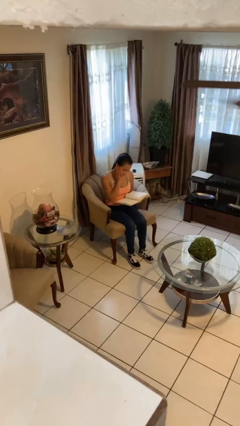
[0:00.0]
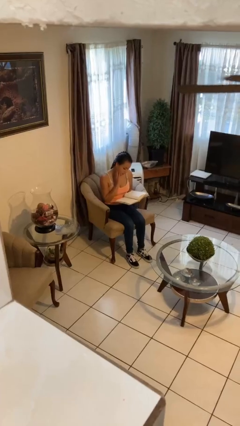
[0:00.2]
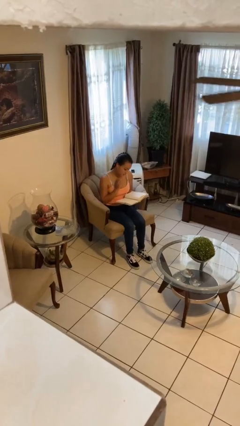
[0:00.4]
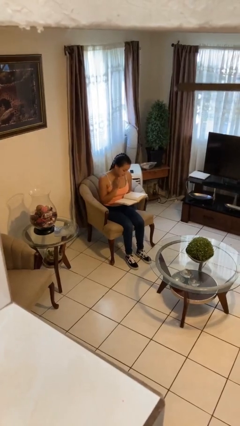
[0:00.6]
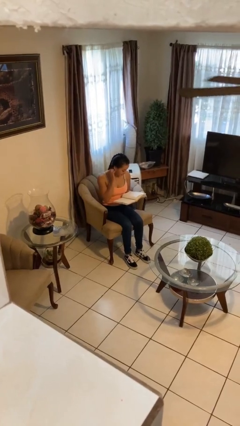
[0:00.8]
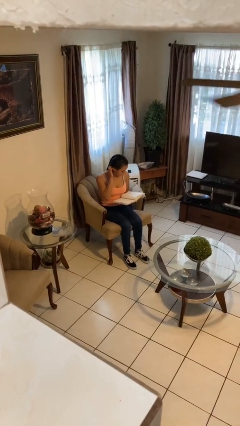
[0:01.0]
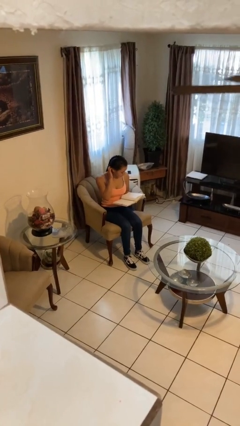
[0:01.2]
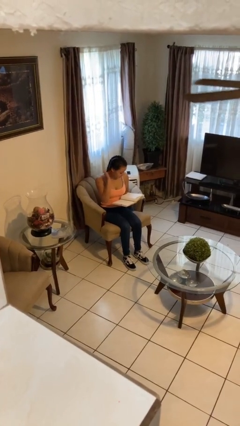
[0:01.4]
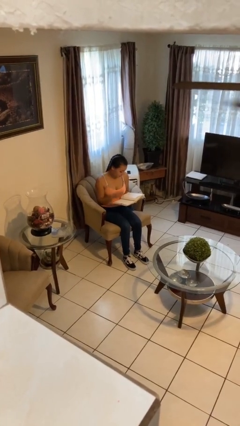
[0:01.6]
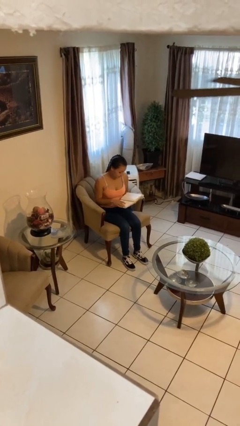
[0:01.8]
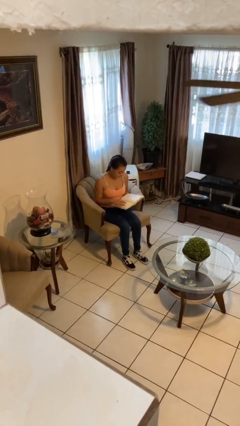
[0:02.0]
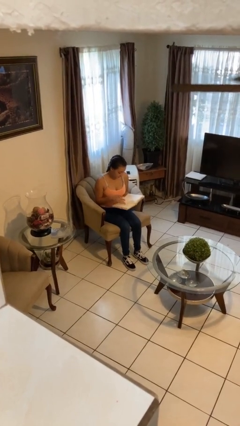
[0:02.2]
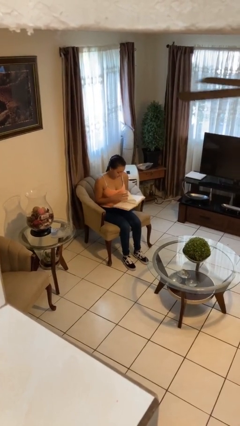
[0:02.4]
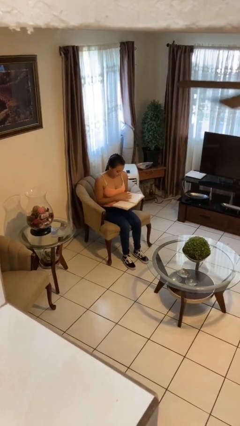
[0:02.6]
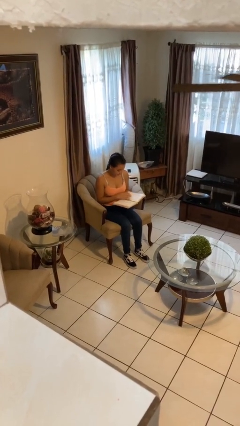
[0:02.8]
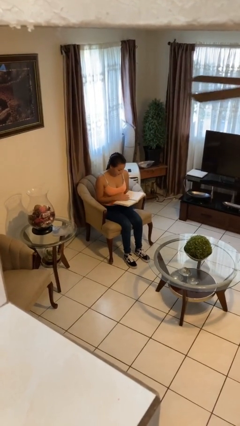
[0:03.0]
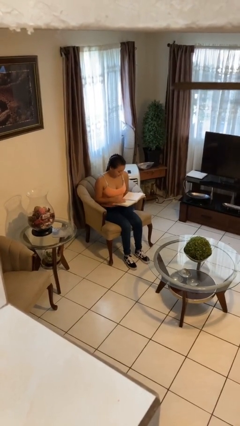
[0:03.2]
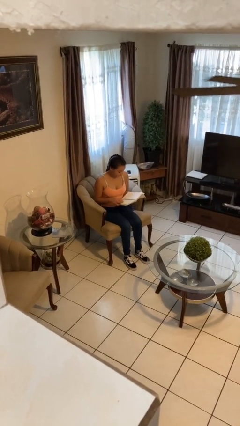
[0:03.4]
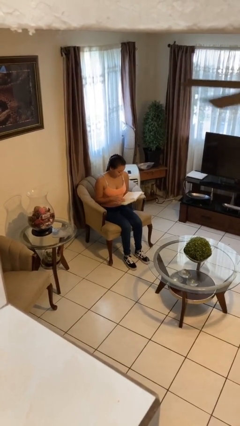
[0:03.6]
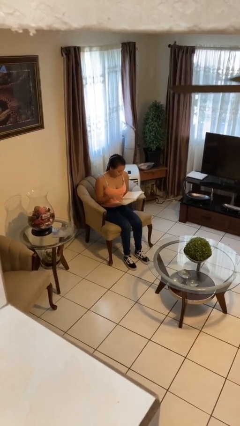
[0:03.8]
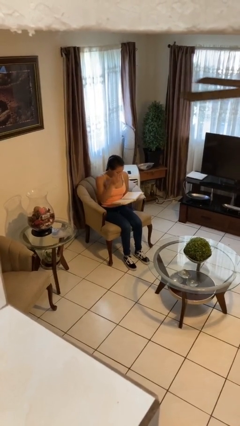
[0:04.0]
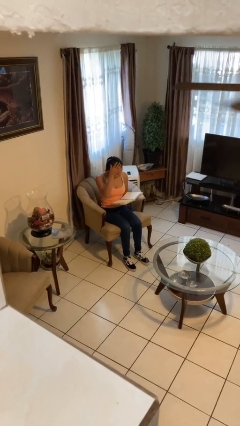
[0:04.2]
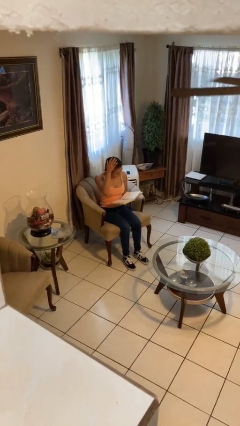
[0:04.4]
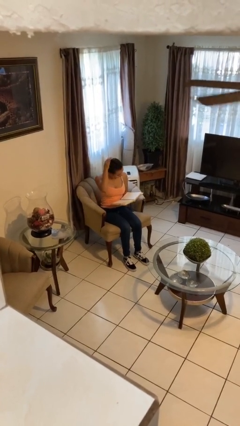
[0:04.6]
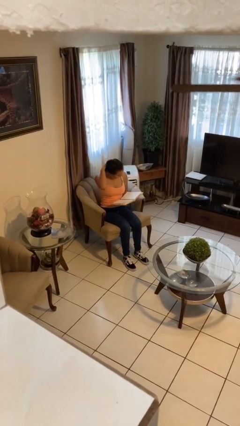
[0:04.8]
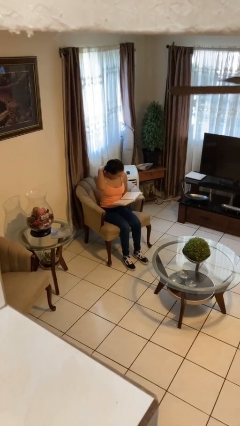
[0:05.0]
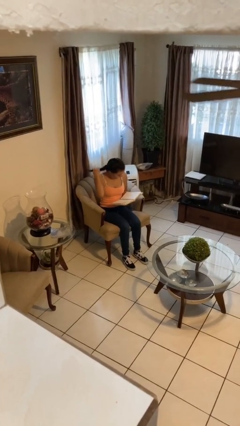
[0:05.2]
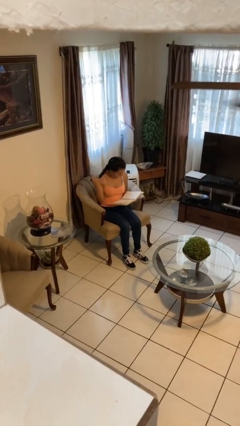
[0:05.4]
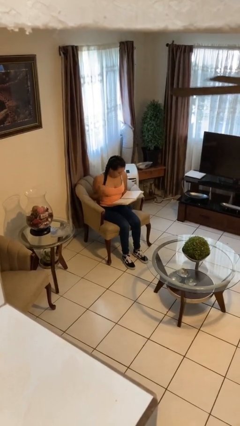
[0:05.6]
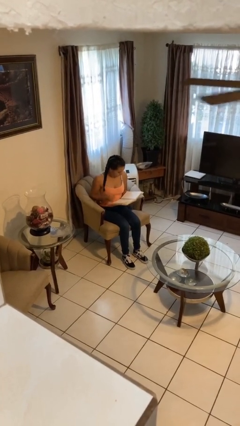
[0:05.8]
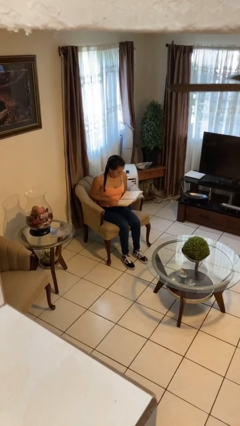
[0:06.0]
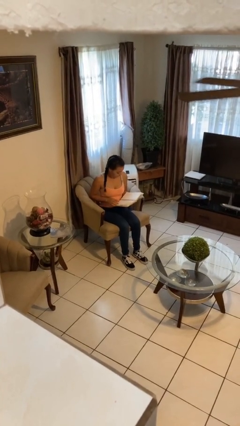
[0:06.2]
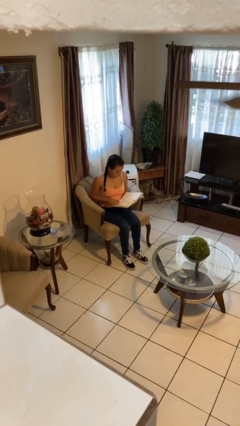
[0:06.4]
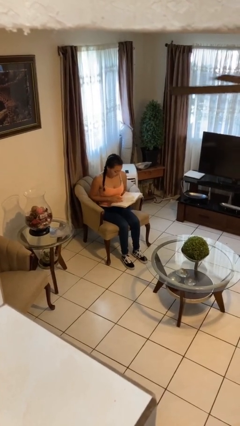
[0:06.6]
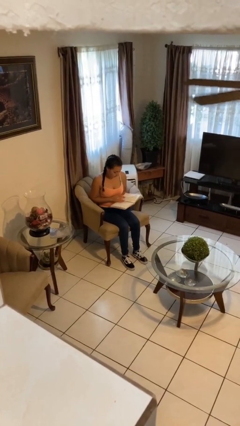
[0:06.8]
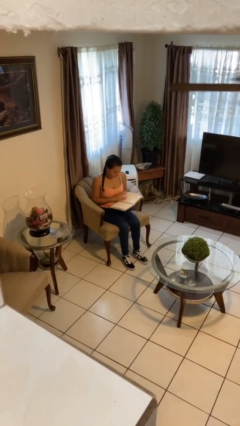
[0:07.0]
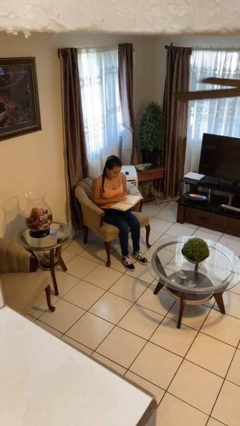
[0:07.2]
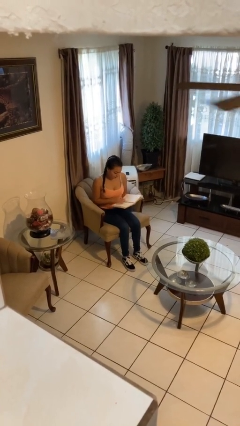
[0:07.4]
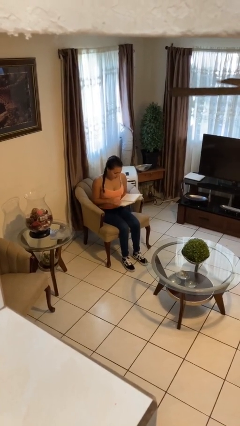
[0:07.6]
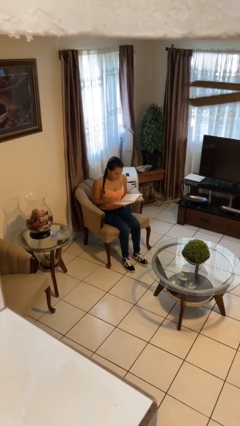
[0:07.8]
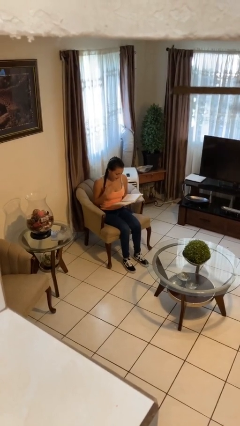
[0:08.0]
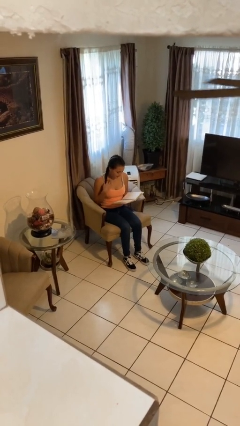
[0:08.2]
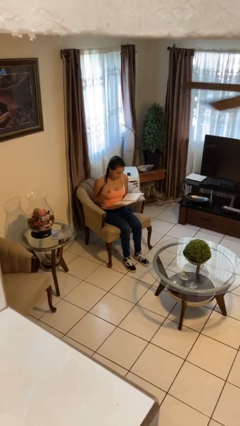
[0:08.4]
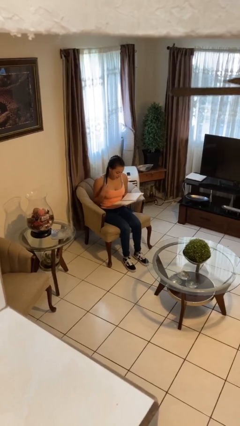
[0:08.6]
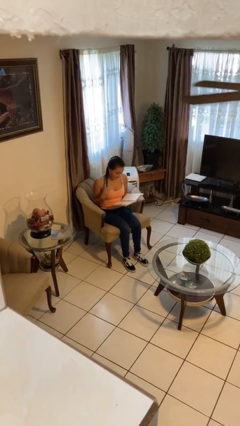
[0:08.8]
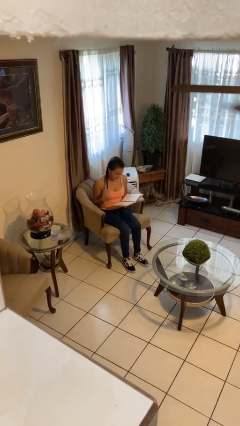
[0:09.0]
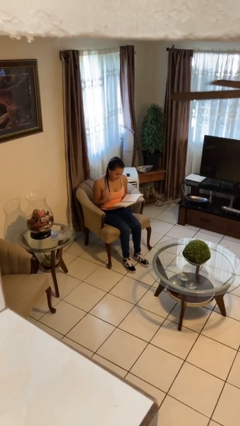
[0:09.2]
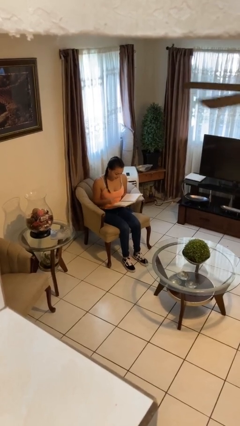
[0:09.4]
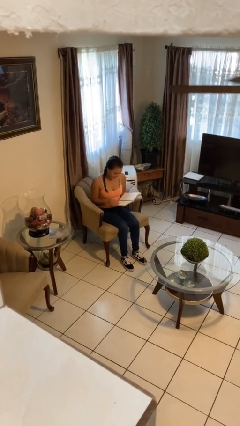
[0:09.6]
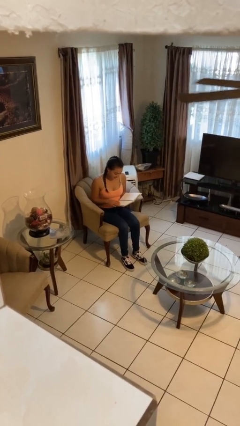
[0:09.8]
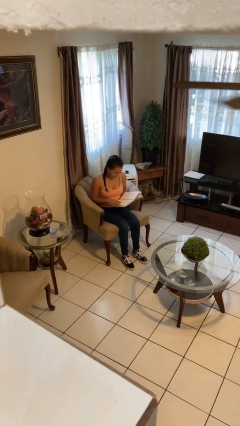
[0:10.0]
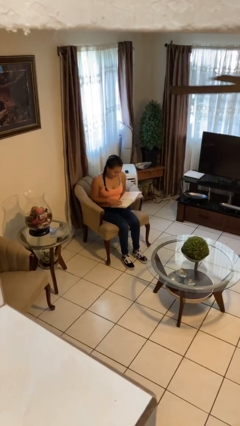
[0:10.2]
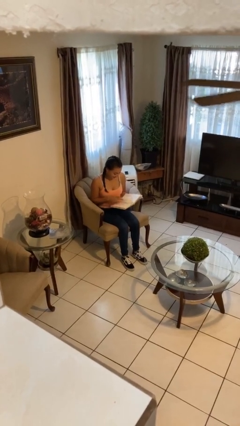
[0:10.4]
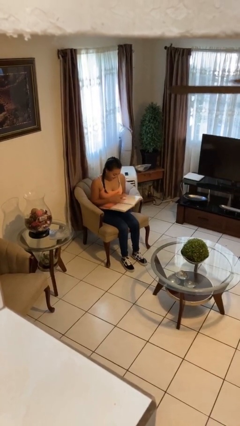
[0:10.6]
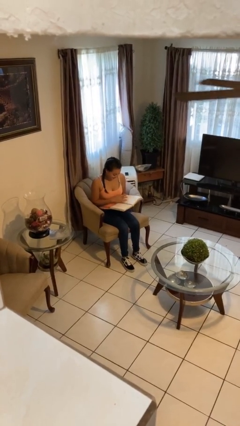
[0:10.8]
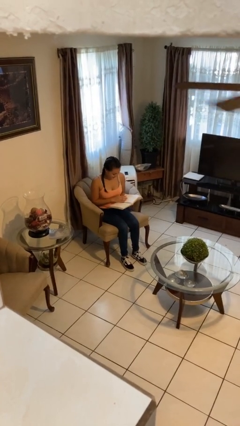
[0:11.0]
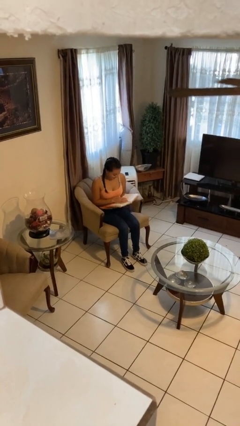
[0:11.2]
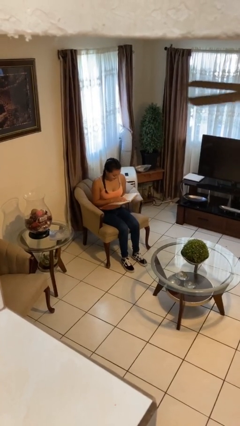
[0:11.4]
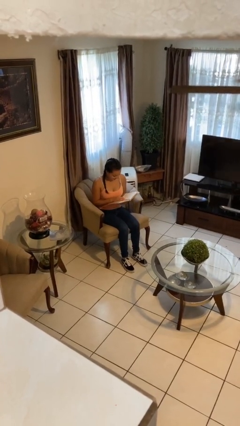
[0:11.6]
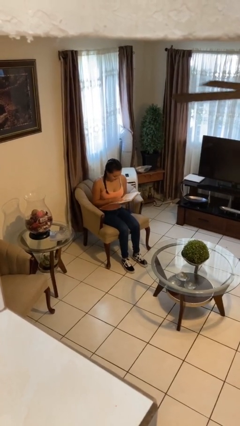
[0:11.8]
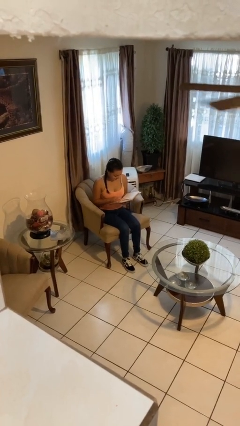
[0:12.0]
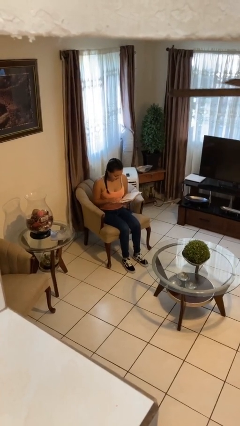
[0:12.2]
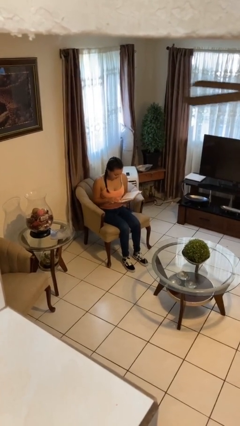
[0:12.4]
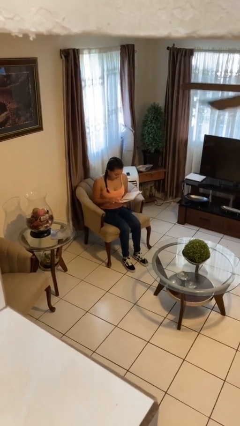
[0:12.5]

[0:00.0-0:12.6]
person reads document

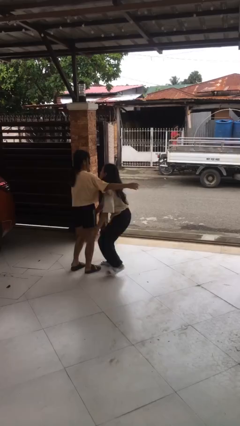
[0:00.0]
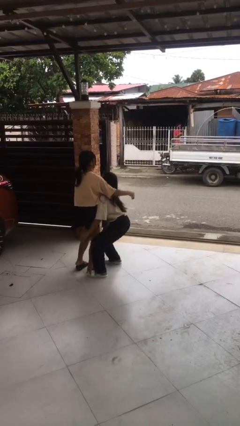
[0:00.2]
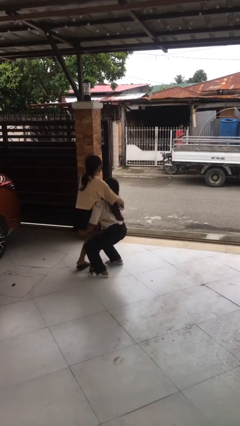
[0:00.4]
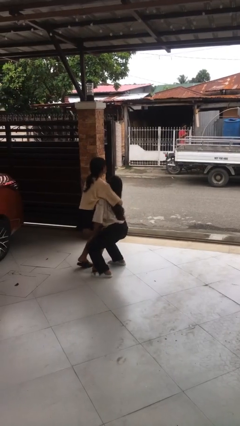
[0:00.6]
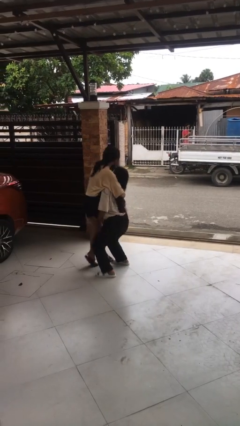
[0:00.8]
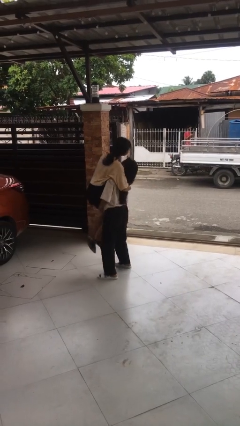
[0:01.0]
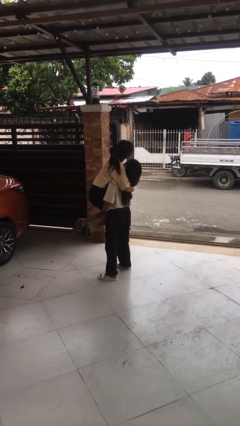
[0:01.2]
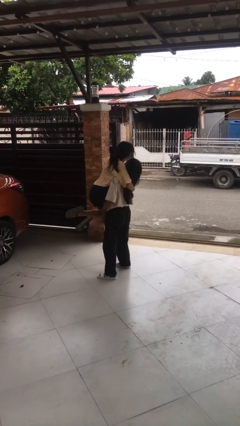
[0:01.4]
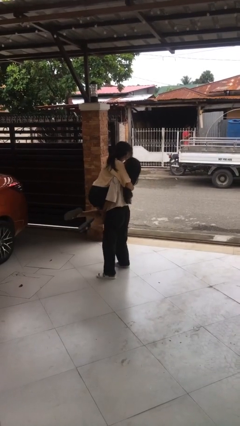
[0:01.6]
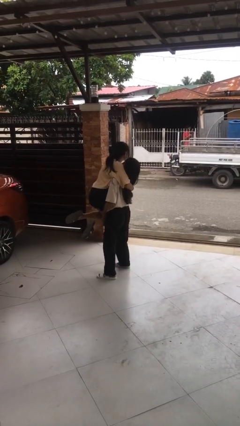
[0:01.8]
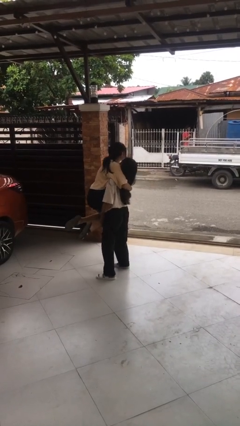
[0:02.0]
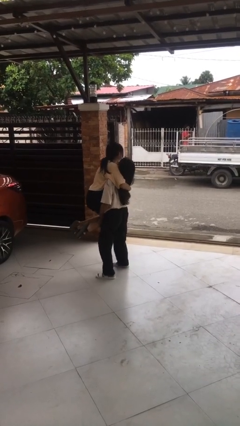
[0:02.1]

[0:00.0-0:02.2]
person picks up person

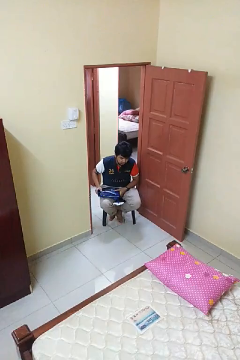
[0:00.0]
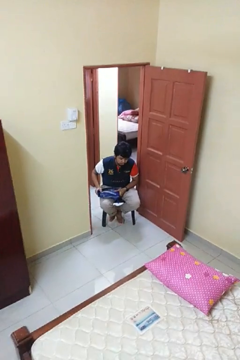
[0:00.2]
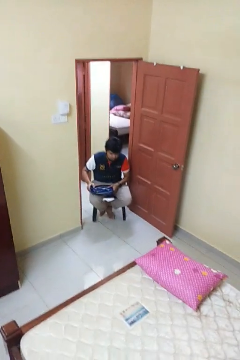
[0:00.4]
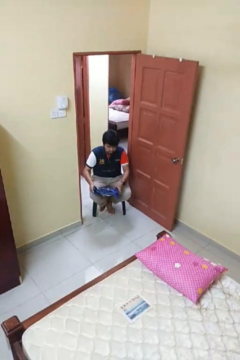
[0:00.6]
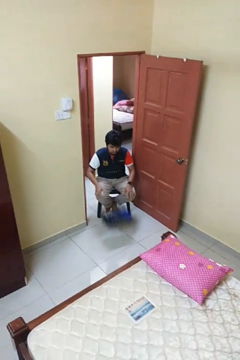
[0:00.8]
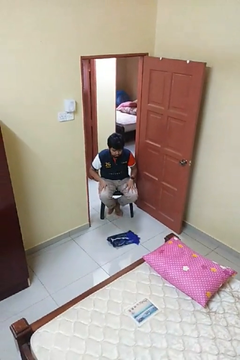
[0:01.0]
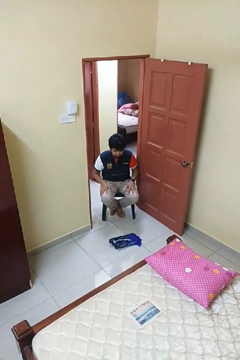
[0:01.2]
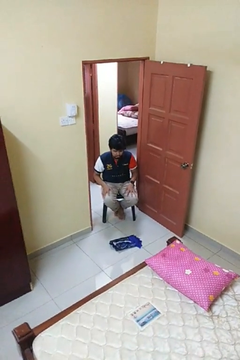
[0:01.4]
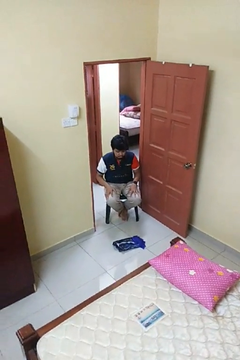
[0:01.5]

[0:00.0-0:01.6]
person drops object

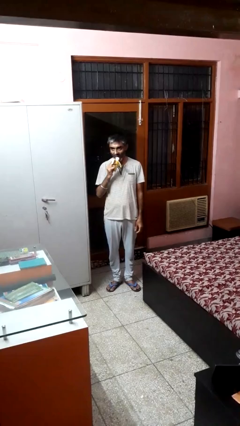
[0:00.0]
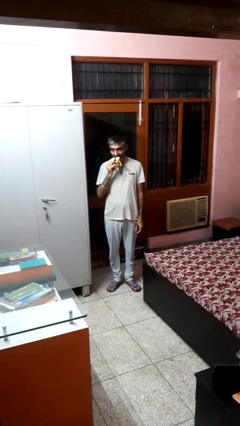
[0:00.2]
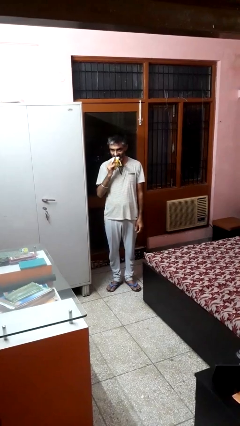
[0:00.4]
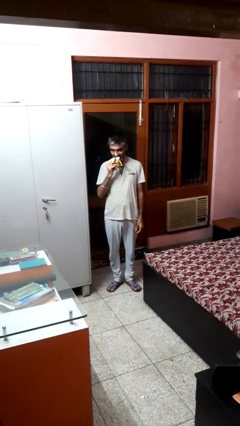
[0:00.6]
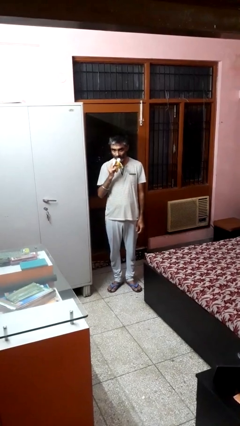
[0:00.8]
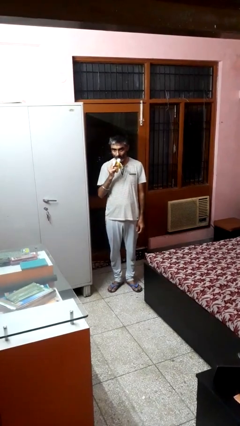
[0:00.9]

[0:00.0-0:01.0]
person eats banana

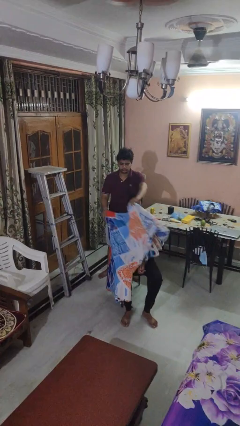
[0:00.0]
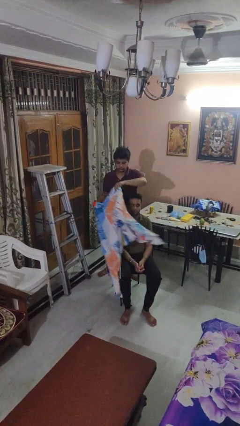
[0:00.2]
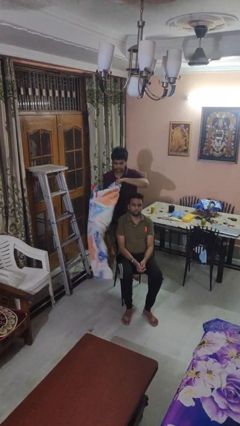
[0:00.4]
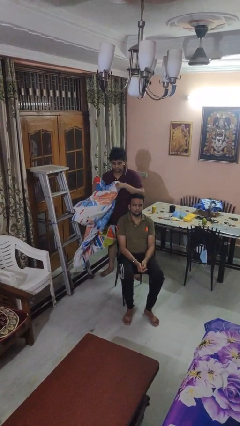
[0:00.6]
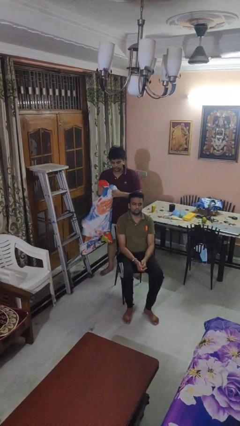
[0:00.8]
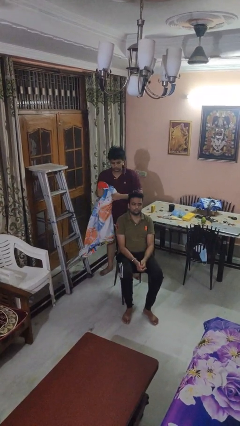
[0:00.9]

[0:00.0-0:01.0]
person uncovers friend with blanket
